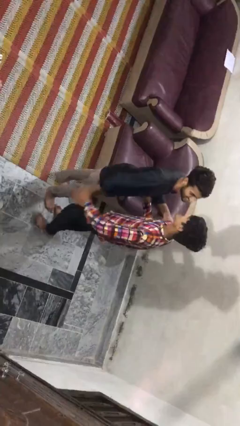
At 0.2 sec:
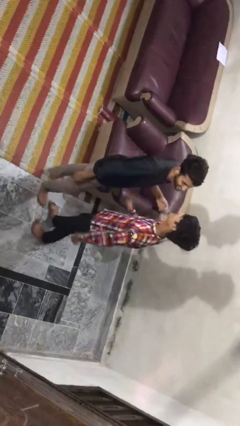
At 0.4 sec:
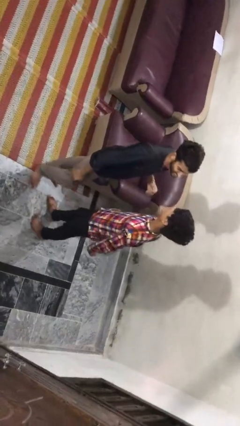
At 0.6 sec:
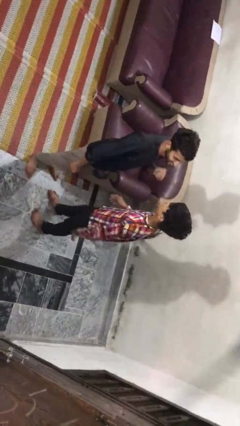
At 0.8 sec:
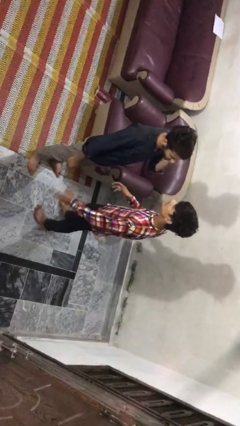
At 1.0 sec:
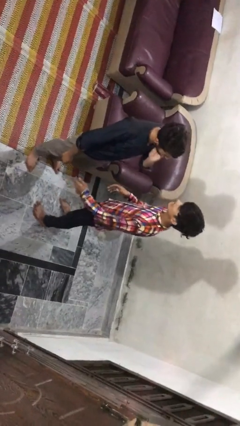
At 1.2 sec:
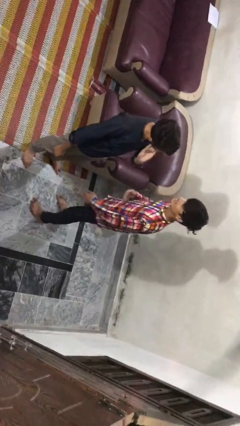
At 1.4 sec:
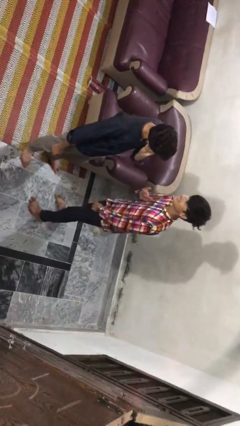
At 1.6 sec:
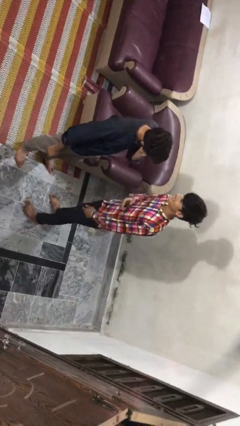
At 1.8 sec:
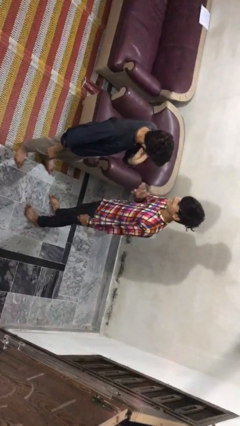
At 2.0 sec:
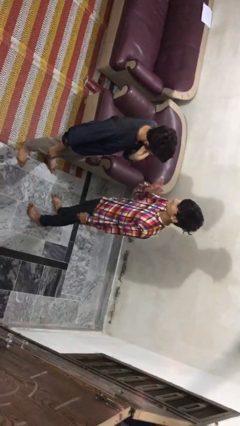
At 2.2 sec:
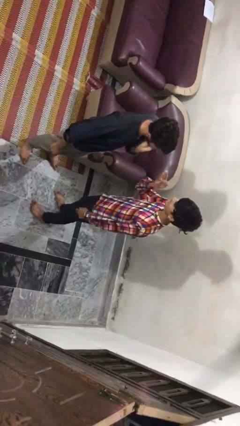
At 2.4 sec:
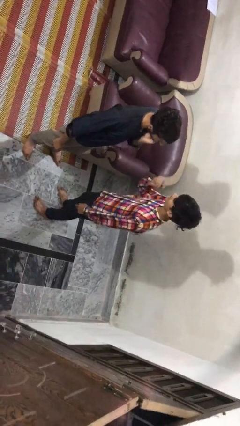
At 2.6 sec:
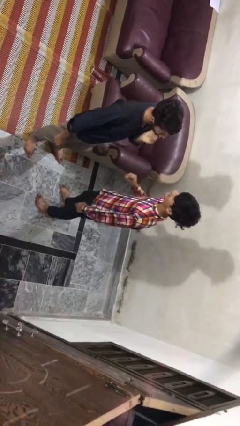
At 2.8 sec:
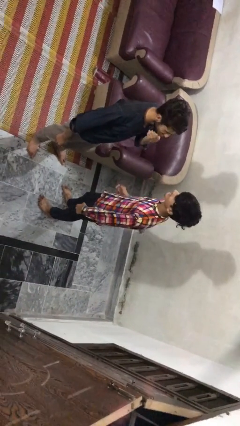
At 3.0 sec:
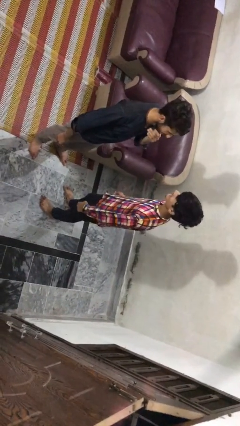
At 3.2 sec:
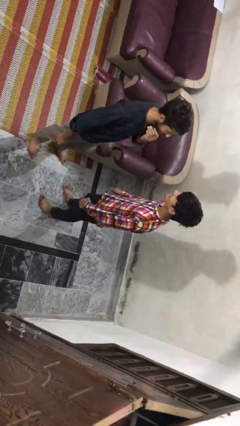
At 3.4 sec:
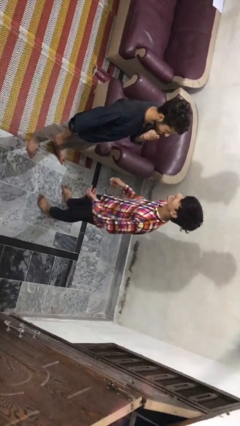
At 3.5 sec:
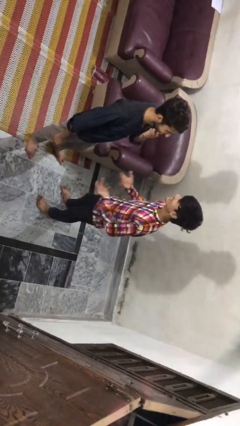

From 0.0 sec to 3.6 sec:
person talks to person

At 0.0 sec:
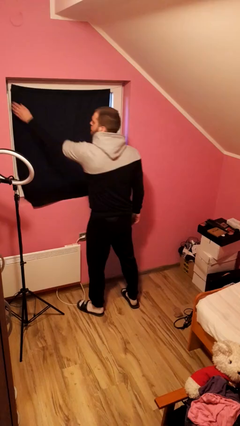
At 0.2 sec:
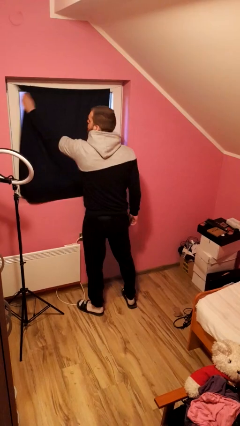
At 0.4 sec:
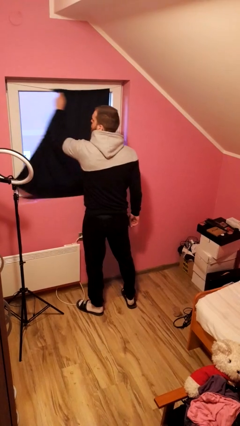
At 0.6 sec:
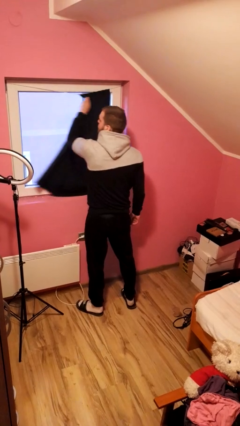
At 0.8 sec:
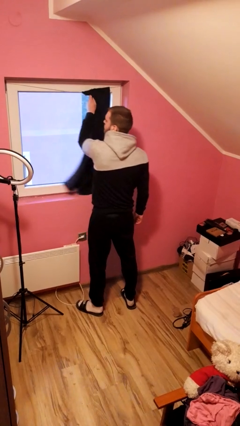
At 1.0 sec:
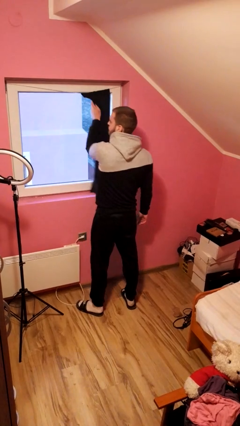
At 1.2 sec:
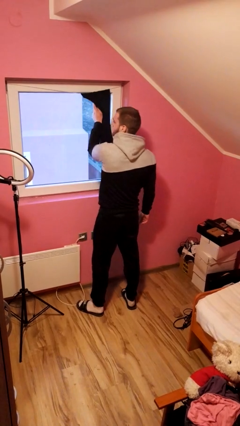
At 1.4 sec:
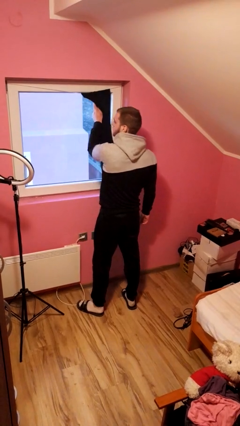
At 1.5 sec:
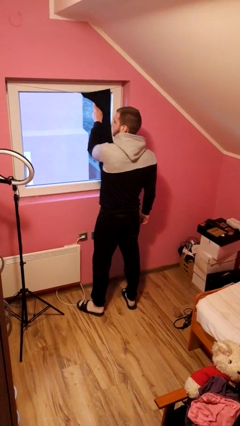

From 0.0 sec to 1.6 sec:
person opens curtains

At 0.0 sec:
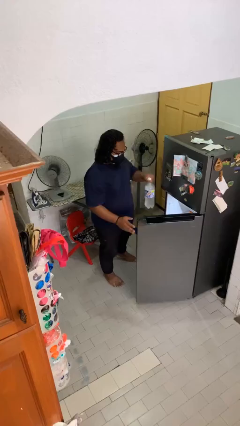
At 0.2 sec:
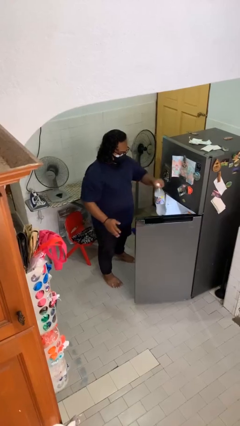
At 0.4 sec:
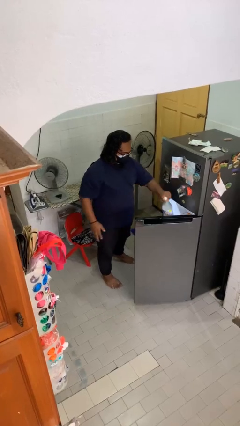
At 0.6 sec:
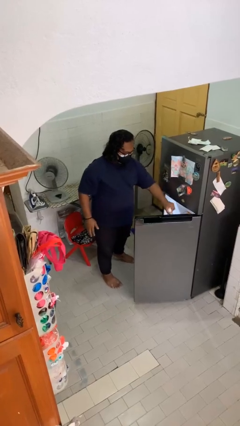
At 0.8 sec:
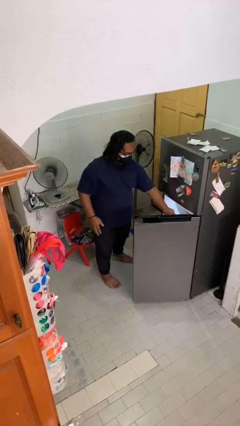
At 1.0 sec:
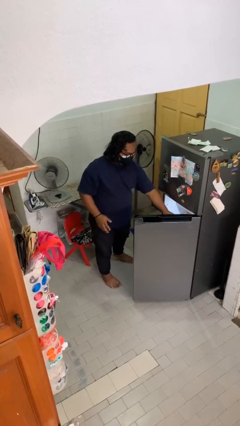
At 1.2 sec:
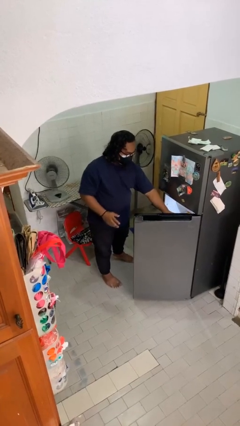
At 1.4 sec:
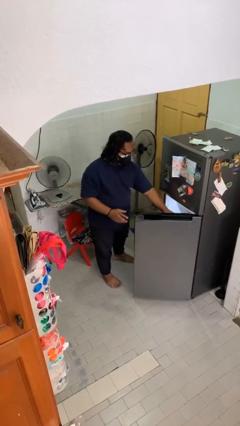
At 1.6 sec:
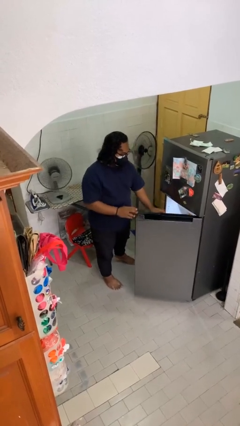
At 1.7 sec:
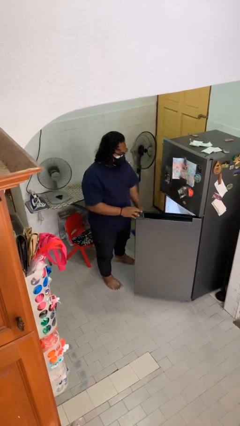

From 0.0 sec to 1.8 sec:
person puts object into refrigerator

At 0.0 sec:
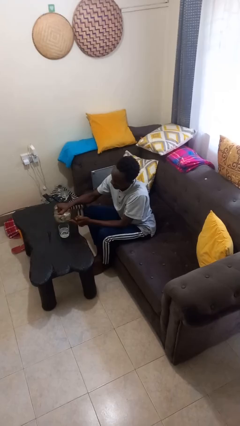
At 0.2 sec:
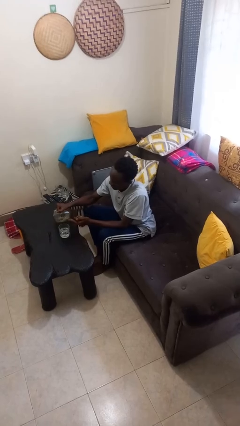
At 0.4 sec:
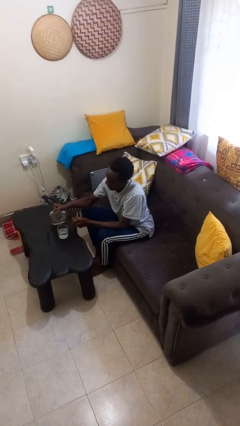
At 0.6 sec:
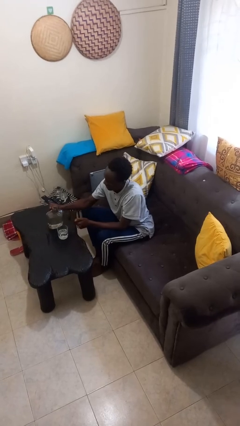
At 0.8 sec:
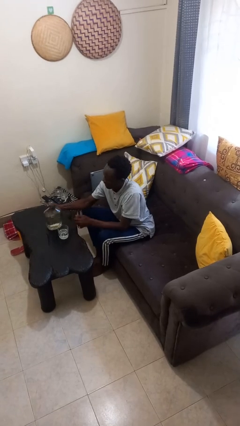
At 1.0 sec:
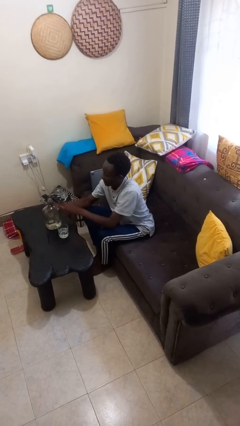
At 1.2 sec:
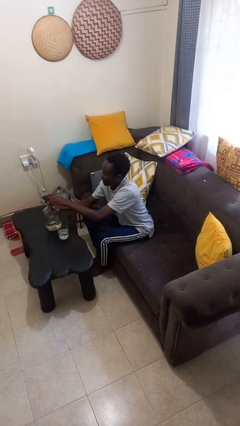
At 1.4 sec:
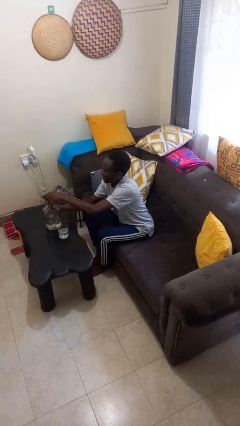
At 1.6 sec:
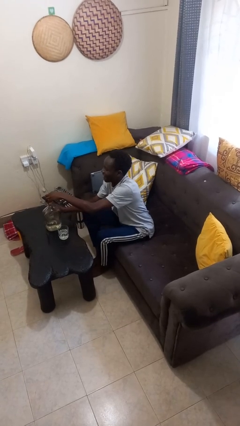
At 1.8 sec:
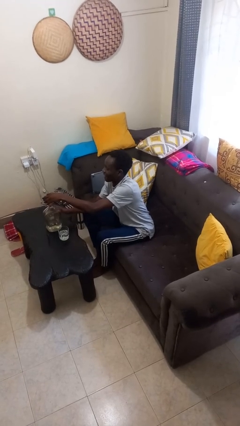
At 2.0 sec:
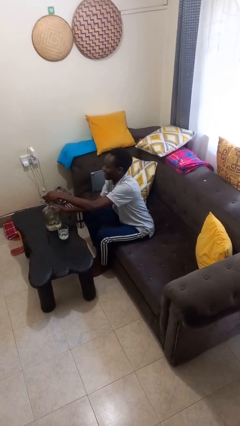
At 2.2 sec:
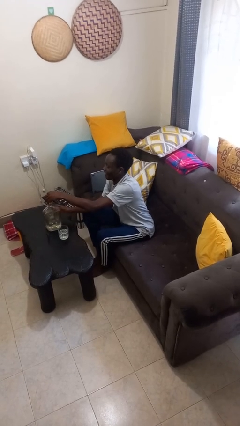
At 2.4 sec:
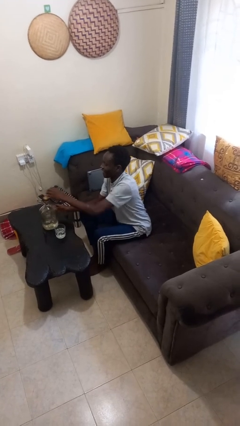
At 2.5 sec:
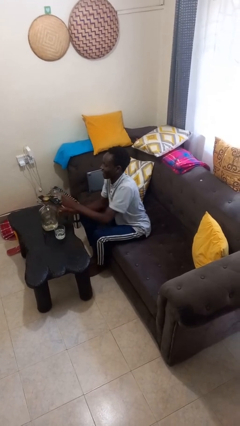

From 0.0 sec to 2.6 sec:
person screws lid to bottle

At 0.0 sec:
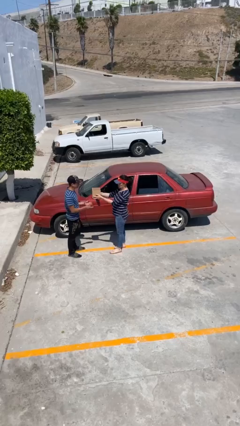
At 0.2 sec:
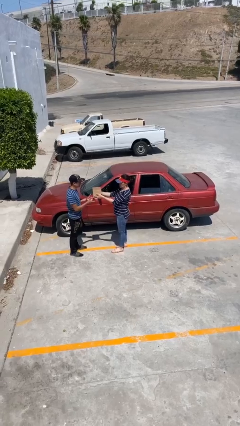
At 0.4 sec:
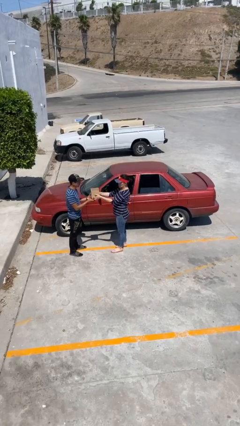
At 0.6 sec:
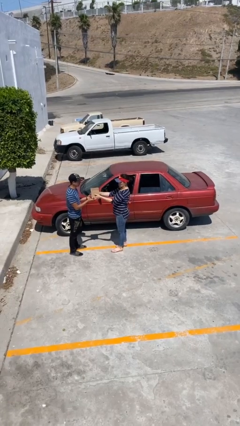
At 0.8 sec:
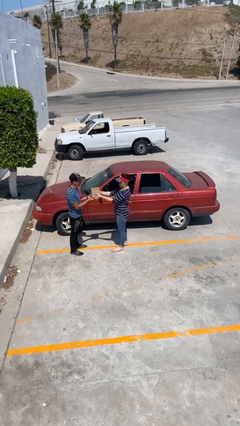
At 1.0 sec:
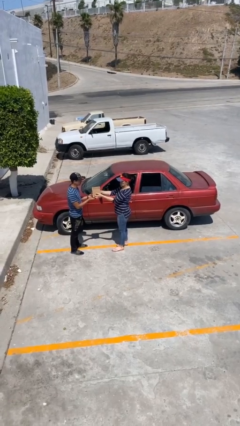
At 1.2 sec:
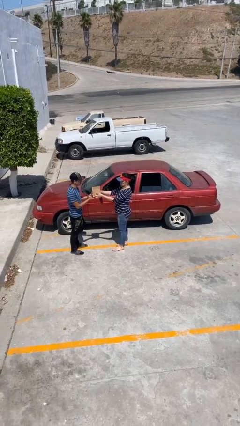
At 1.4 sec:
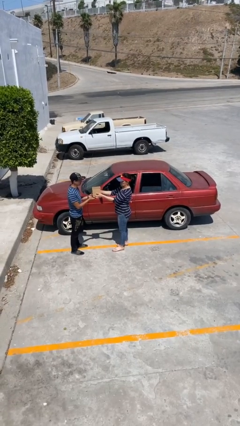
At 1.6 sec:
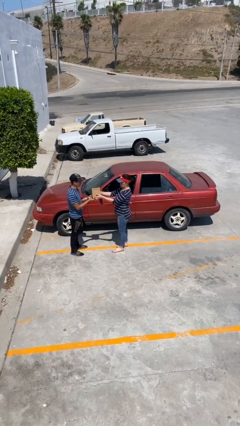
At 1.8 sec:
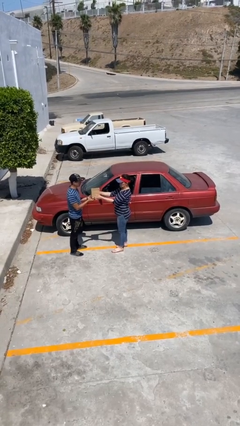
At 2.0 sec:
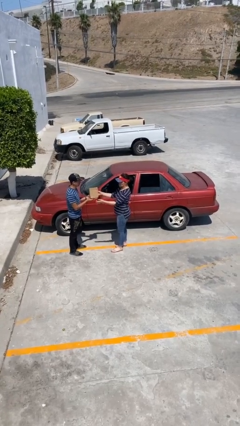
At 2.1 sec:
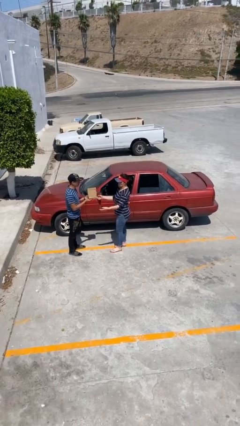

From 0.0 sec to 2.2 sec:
person transfers object to person

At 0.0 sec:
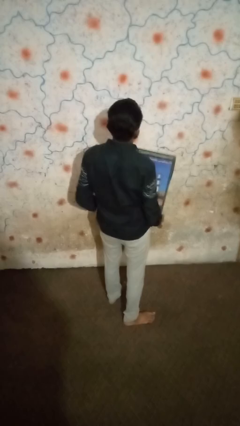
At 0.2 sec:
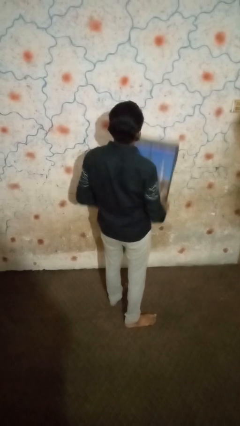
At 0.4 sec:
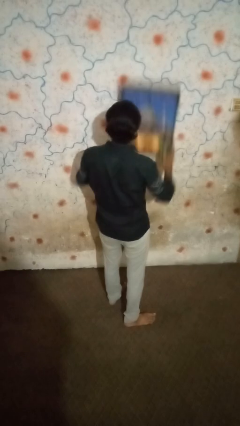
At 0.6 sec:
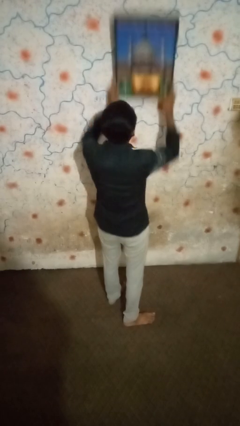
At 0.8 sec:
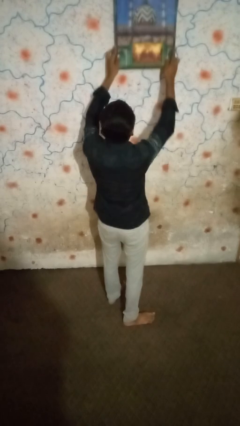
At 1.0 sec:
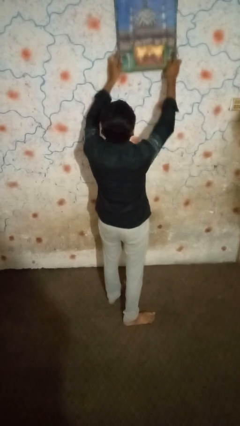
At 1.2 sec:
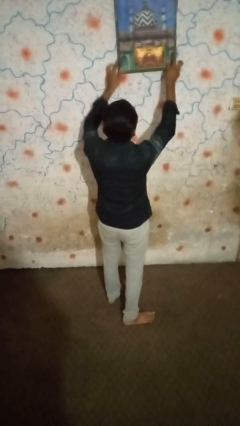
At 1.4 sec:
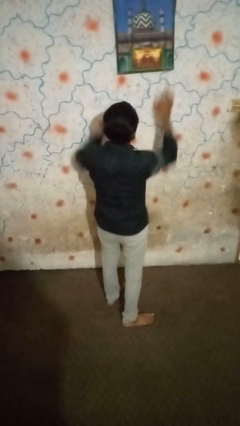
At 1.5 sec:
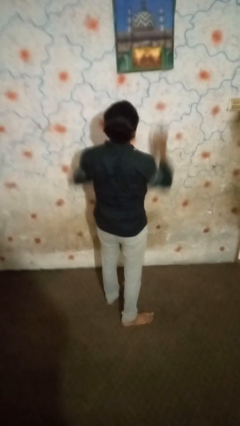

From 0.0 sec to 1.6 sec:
person puts up picture frame

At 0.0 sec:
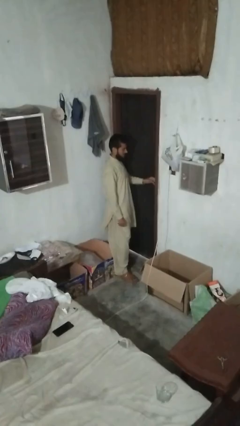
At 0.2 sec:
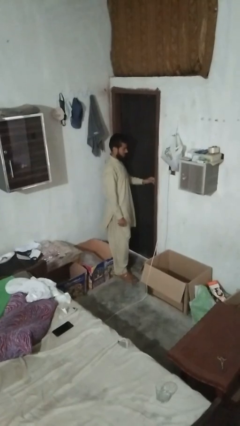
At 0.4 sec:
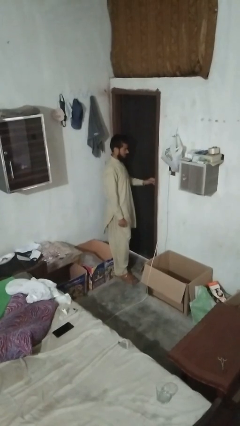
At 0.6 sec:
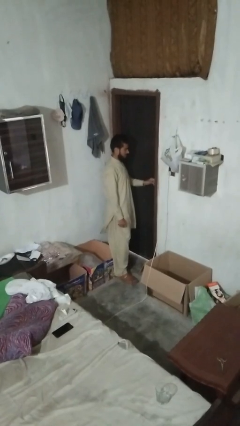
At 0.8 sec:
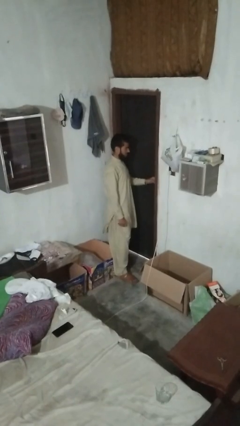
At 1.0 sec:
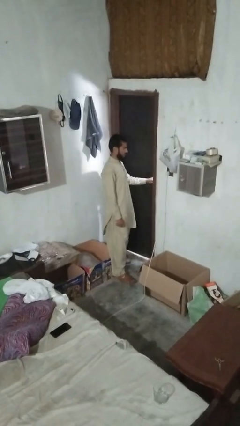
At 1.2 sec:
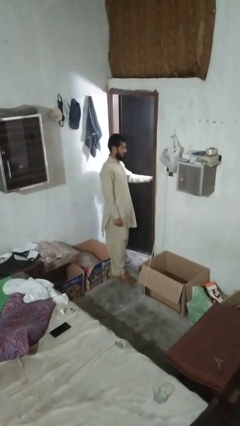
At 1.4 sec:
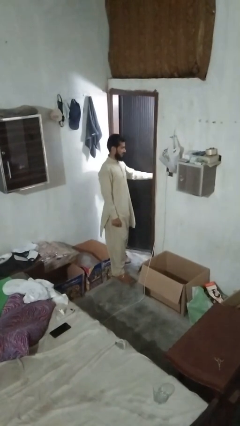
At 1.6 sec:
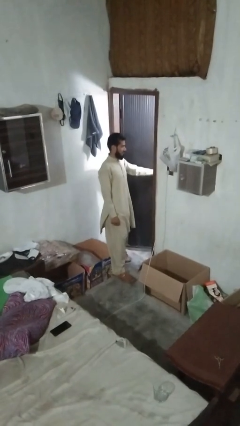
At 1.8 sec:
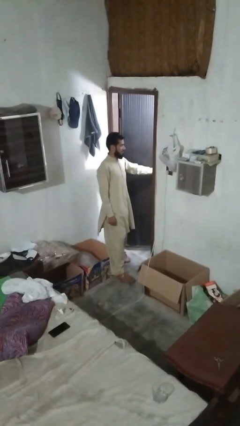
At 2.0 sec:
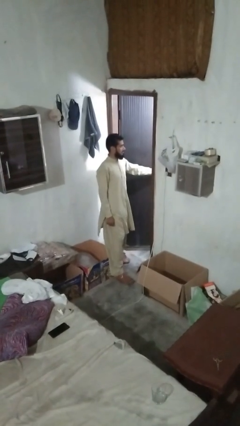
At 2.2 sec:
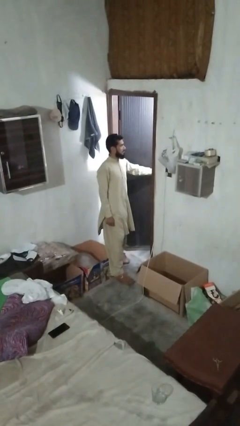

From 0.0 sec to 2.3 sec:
person opens facility door

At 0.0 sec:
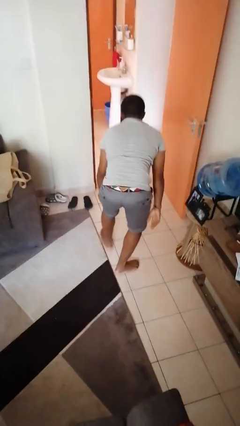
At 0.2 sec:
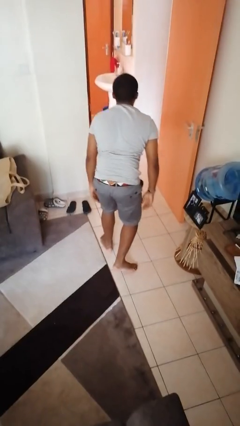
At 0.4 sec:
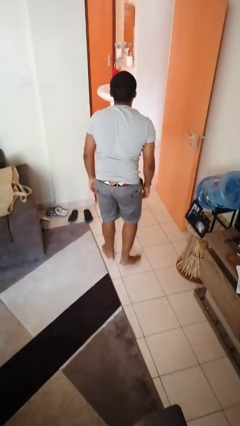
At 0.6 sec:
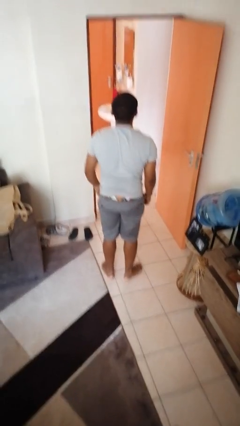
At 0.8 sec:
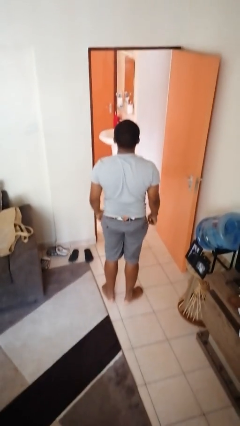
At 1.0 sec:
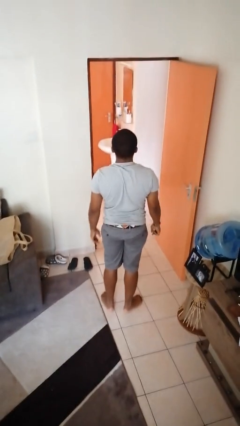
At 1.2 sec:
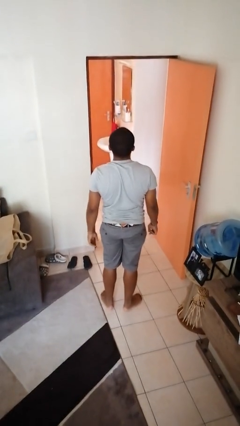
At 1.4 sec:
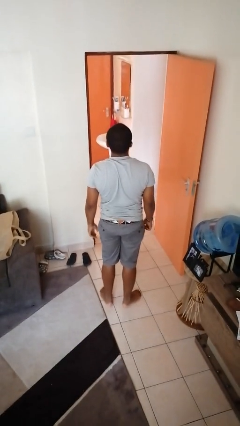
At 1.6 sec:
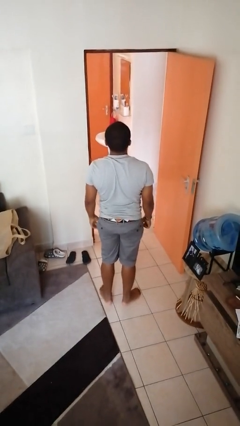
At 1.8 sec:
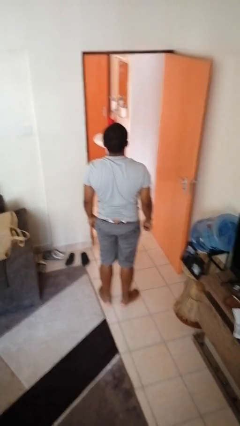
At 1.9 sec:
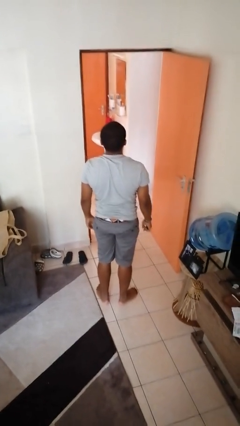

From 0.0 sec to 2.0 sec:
person stands up from floor
